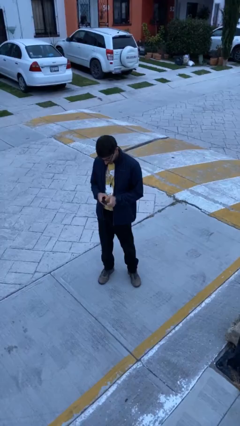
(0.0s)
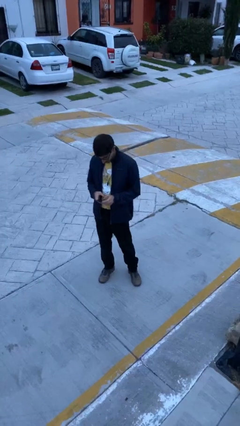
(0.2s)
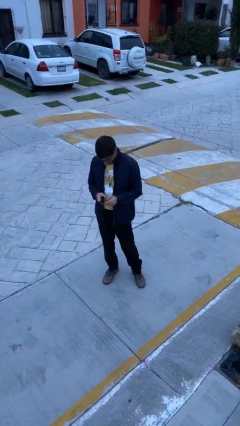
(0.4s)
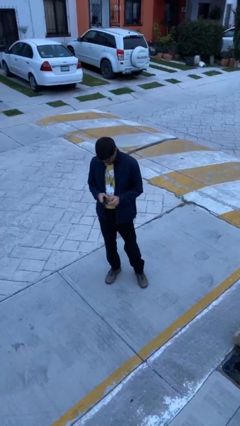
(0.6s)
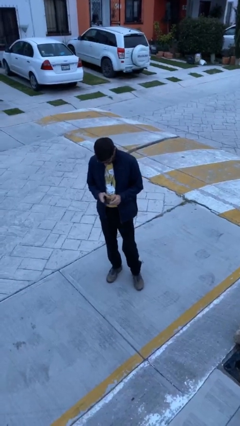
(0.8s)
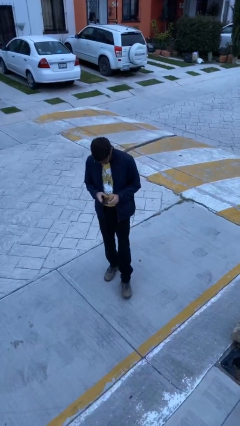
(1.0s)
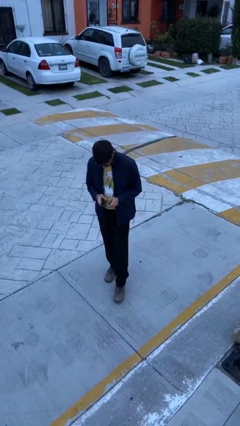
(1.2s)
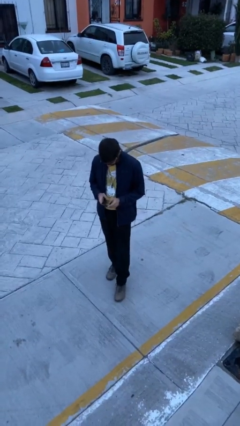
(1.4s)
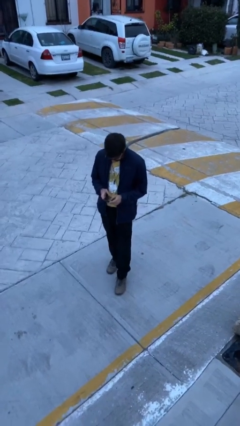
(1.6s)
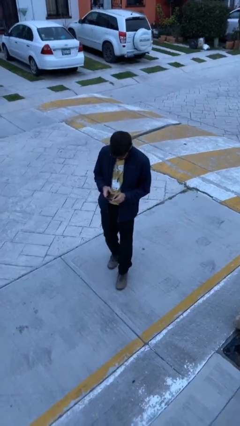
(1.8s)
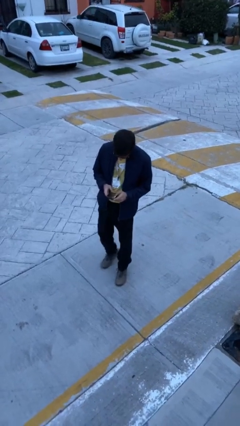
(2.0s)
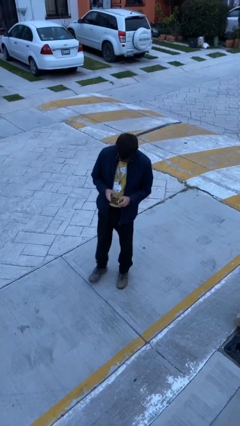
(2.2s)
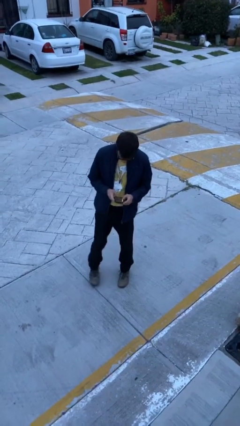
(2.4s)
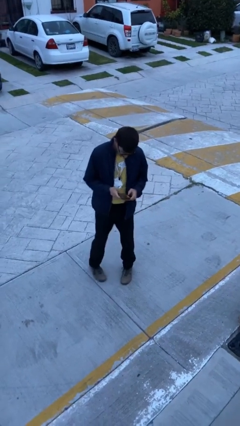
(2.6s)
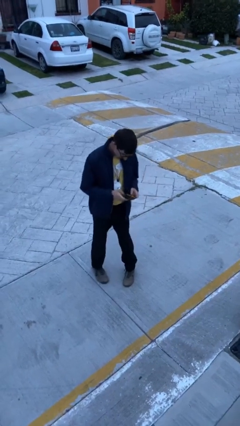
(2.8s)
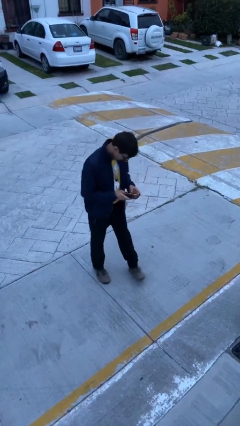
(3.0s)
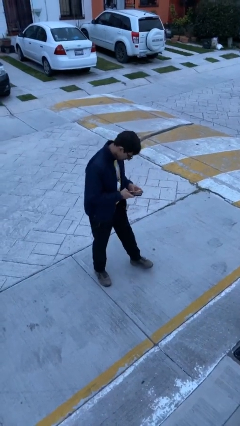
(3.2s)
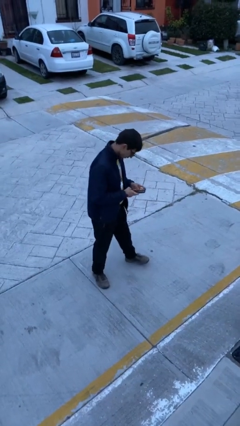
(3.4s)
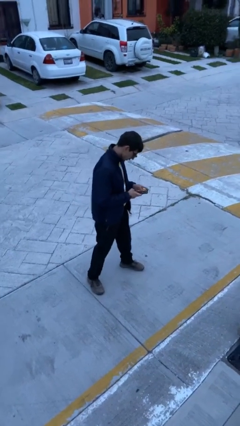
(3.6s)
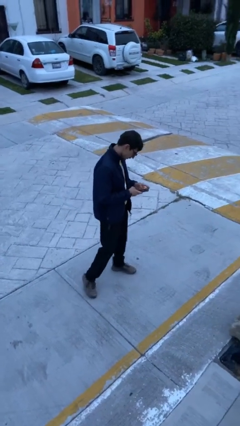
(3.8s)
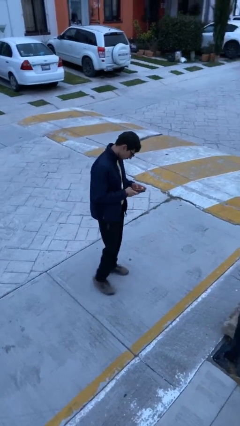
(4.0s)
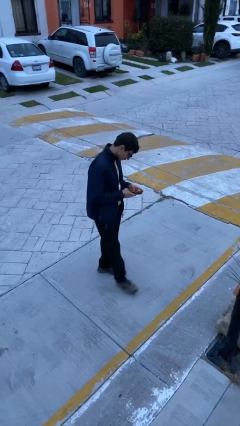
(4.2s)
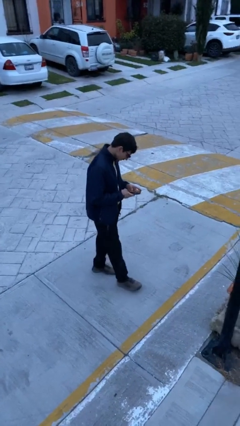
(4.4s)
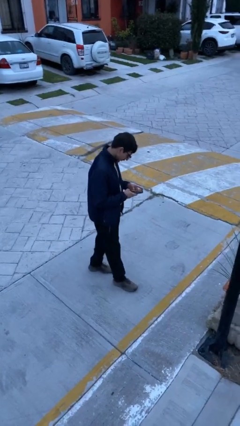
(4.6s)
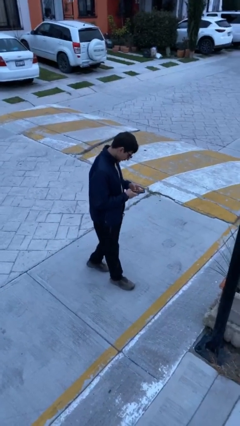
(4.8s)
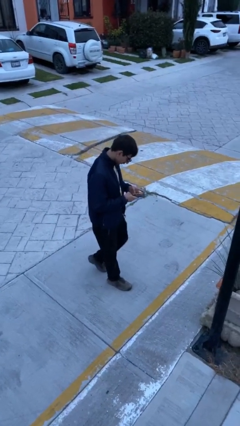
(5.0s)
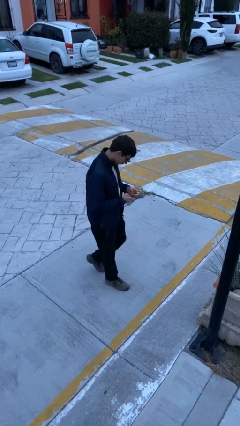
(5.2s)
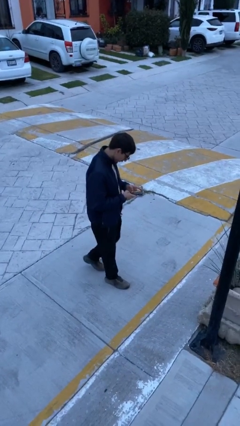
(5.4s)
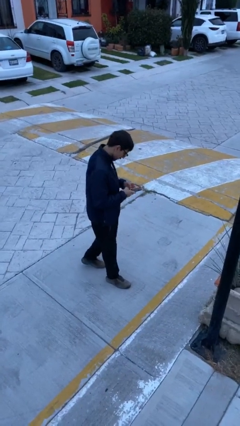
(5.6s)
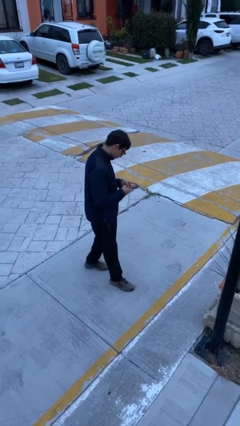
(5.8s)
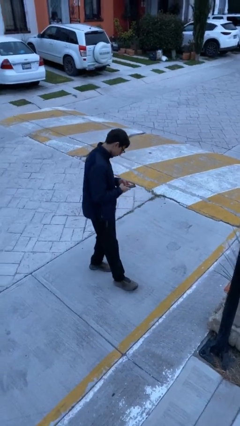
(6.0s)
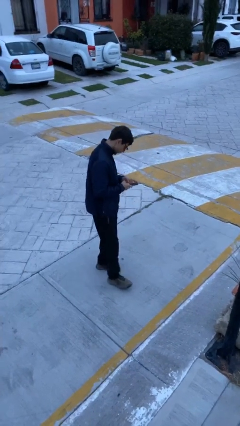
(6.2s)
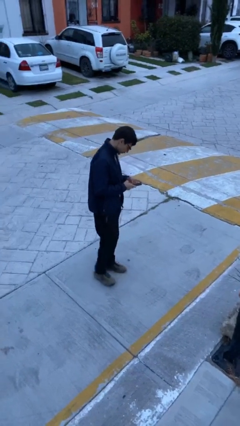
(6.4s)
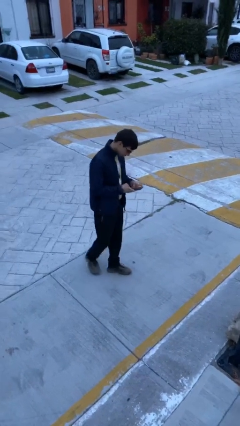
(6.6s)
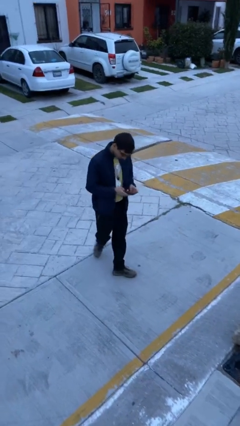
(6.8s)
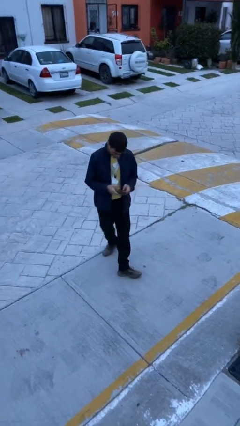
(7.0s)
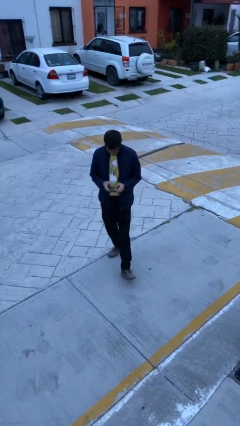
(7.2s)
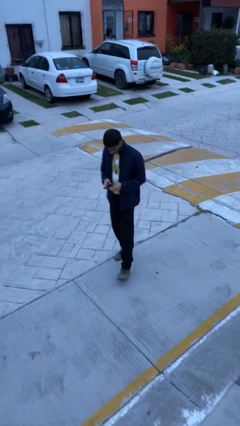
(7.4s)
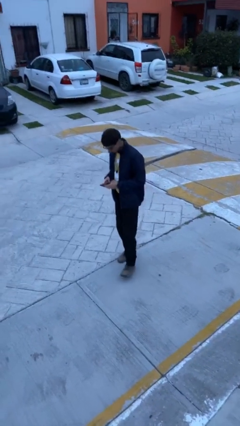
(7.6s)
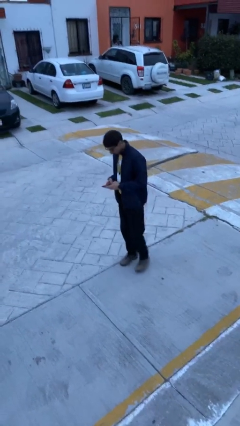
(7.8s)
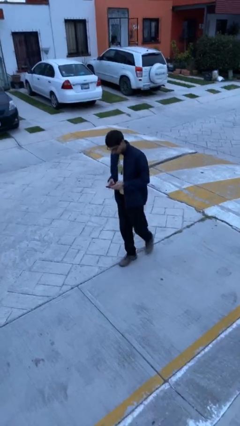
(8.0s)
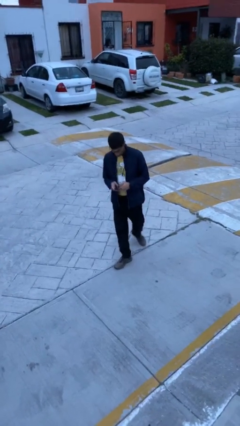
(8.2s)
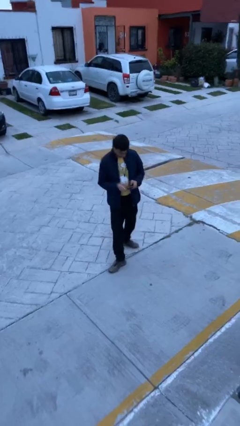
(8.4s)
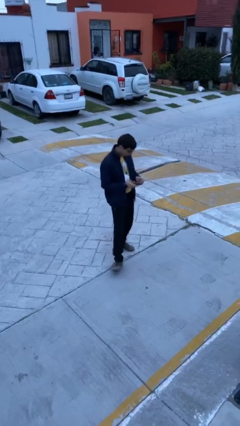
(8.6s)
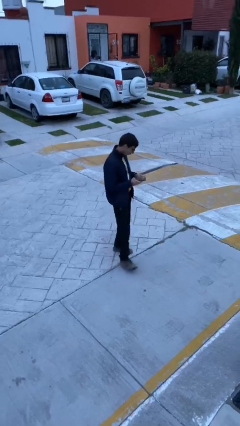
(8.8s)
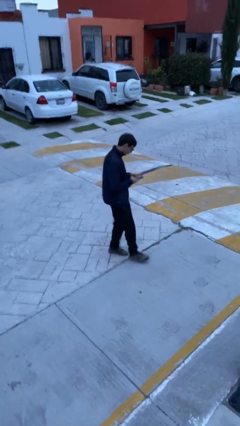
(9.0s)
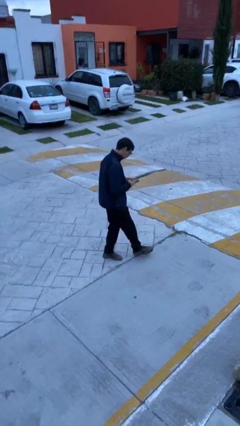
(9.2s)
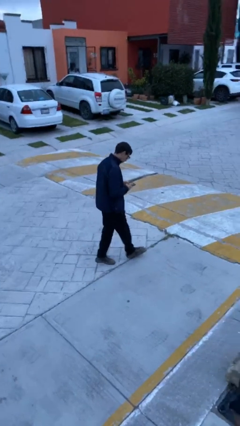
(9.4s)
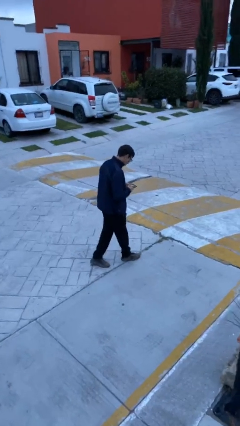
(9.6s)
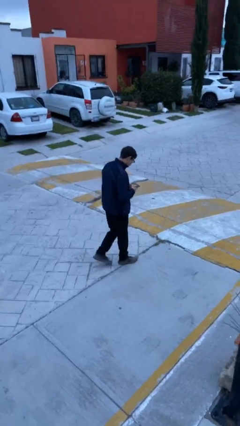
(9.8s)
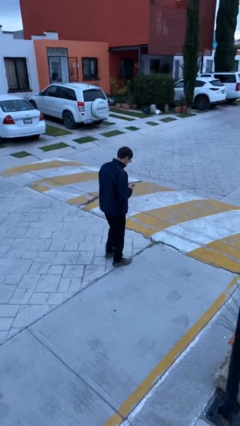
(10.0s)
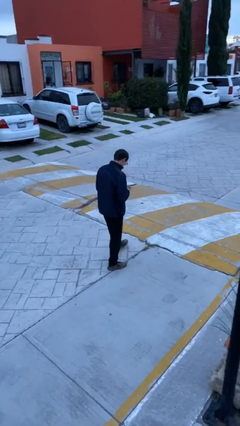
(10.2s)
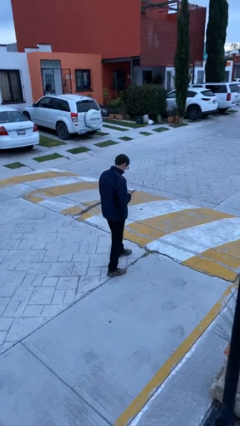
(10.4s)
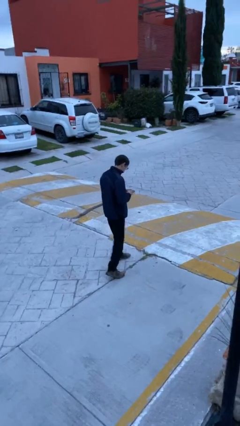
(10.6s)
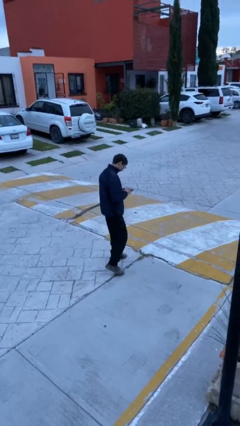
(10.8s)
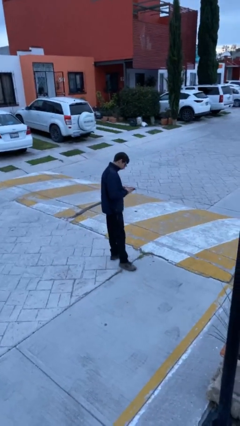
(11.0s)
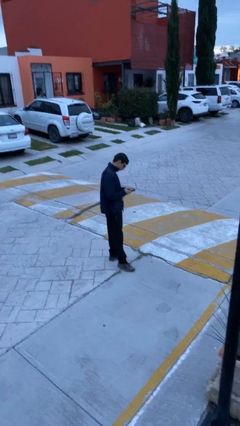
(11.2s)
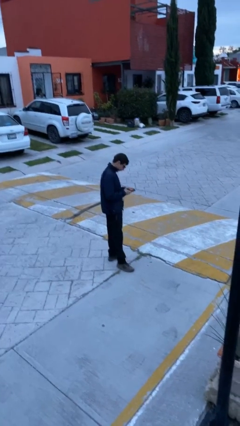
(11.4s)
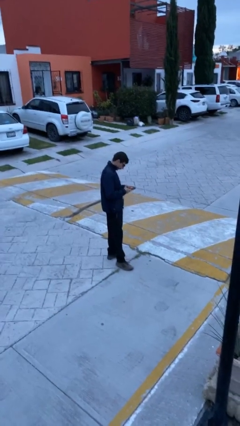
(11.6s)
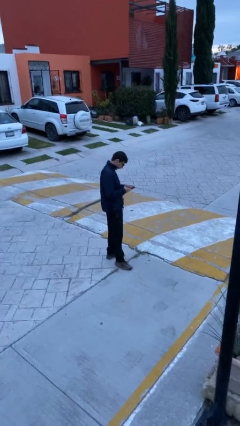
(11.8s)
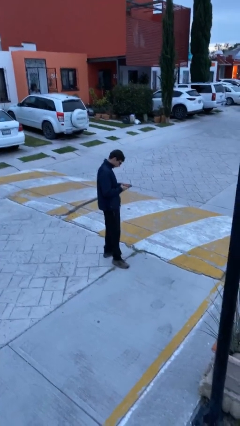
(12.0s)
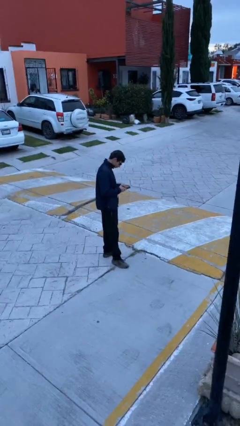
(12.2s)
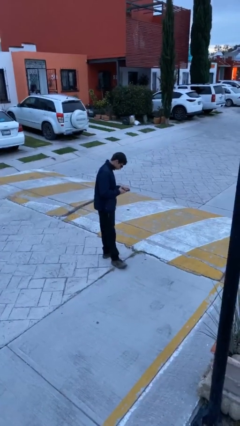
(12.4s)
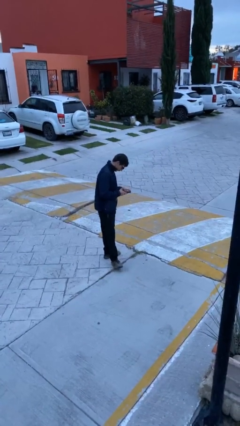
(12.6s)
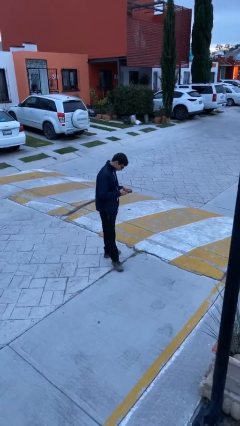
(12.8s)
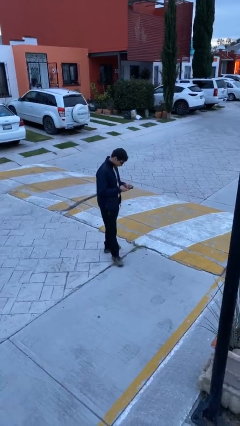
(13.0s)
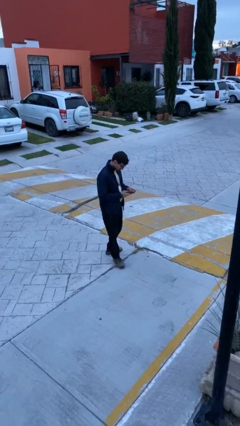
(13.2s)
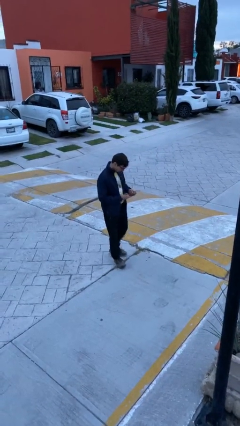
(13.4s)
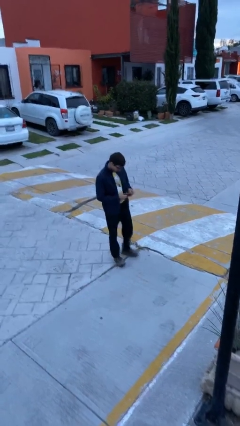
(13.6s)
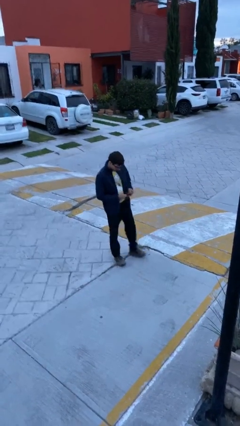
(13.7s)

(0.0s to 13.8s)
person texts on phone

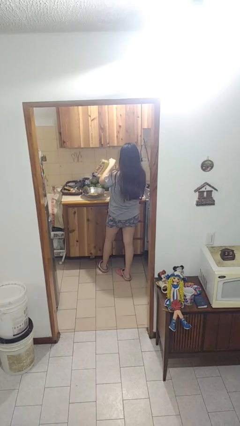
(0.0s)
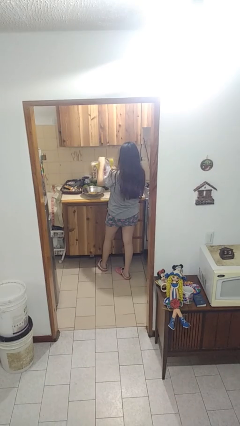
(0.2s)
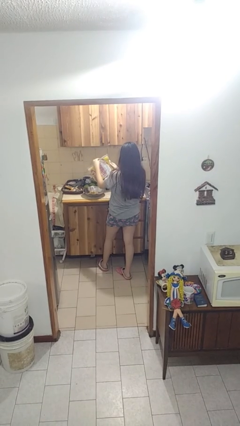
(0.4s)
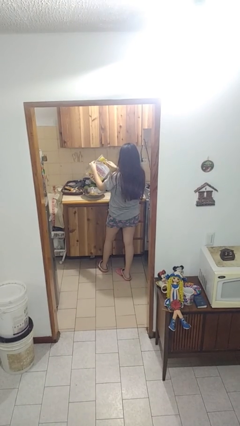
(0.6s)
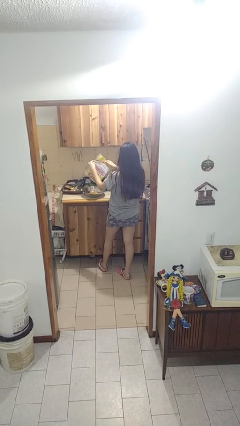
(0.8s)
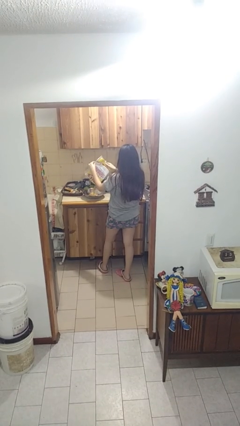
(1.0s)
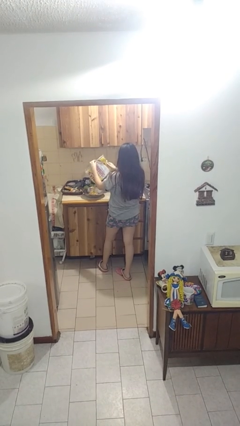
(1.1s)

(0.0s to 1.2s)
person pours into bowl

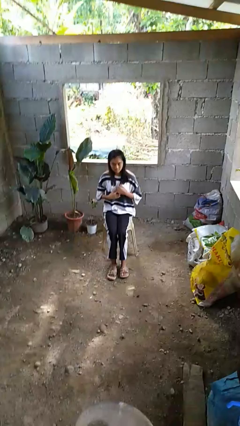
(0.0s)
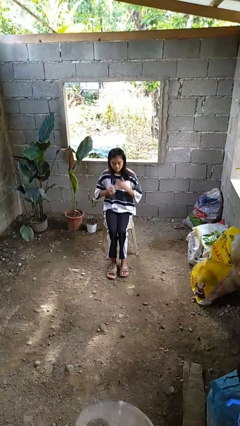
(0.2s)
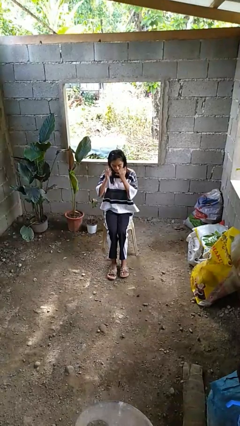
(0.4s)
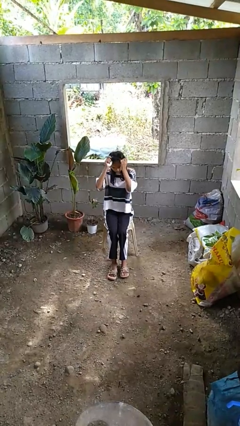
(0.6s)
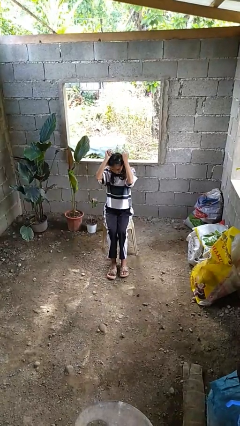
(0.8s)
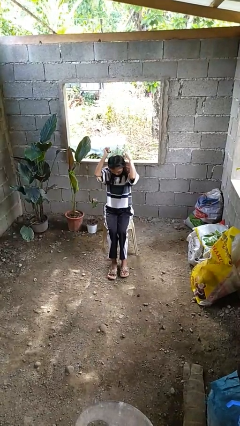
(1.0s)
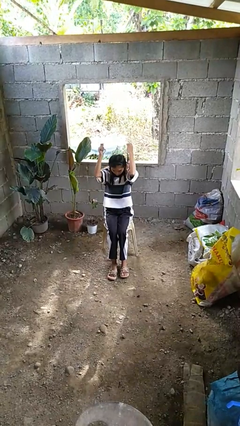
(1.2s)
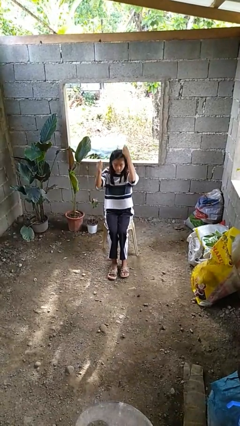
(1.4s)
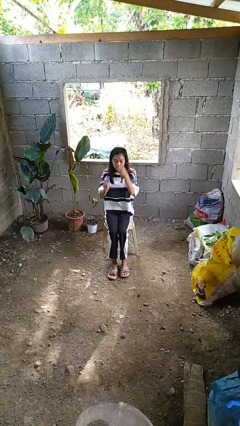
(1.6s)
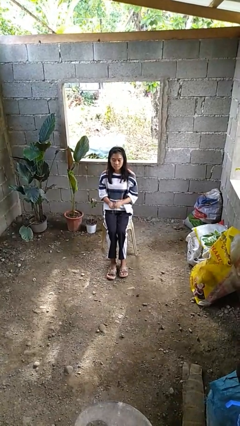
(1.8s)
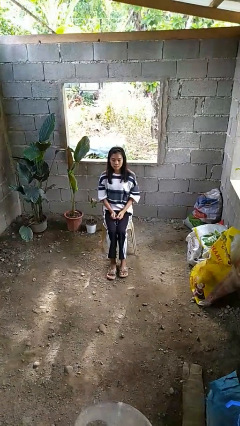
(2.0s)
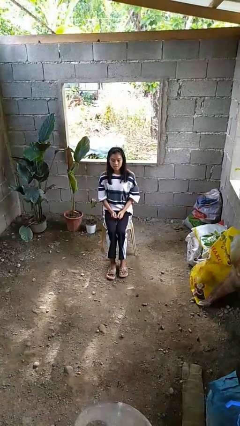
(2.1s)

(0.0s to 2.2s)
person takes off necklace

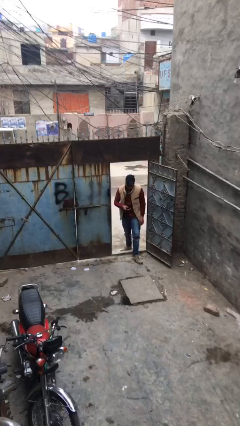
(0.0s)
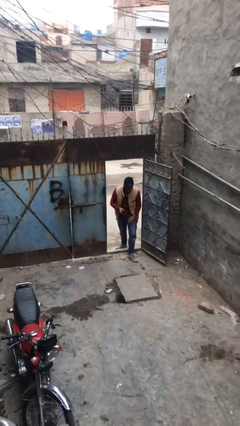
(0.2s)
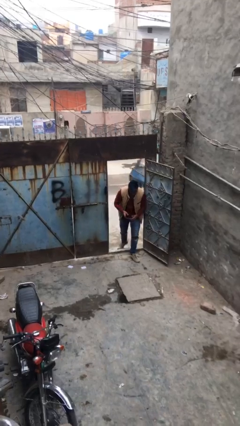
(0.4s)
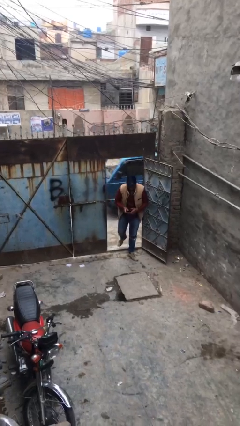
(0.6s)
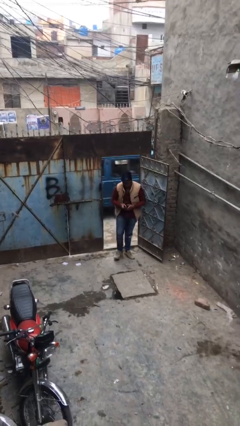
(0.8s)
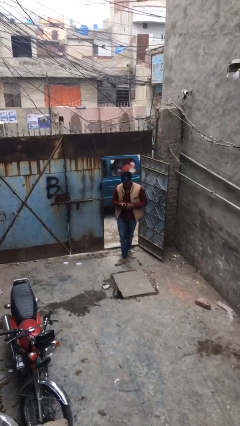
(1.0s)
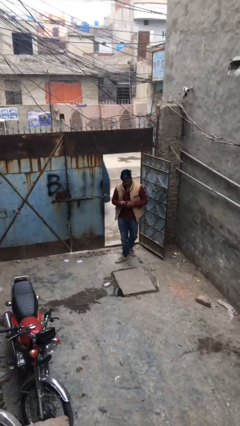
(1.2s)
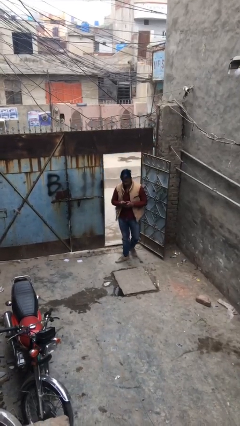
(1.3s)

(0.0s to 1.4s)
person enters scene through structure
